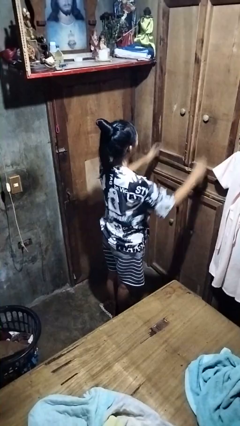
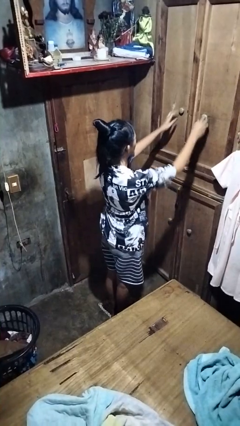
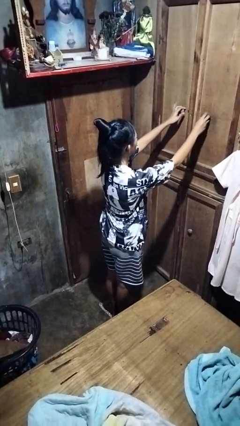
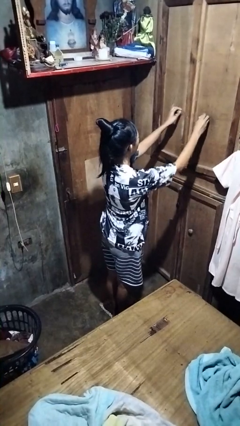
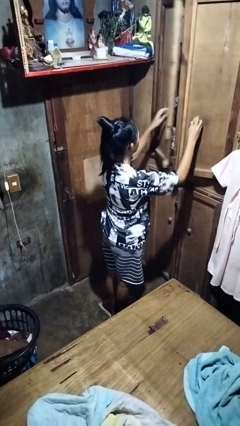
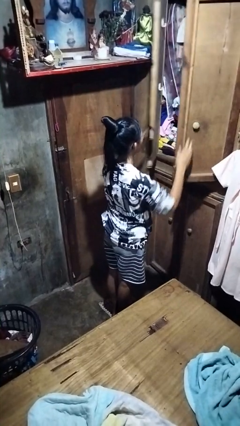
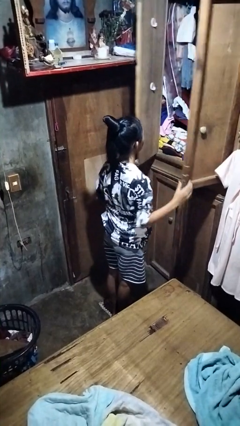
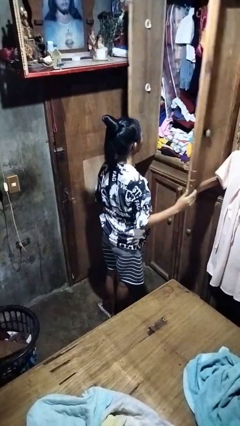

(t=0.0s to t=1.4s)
person opens closet door

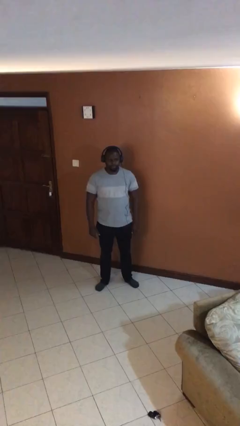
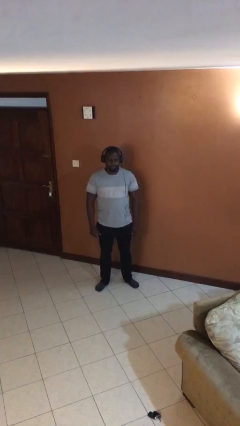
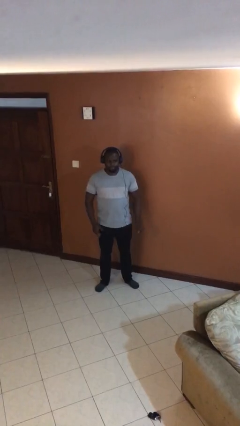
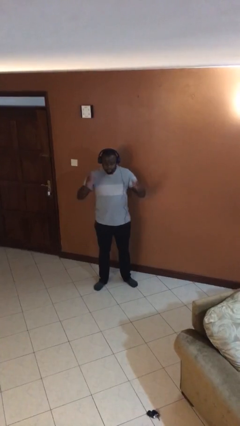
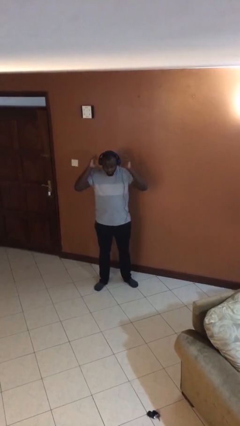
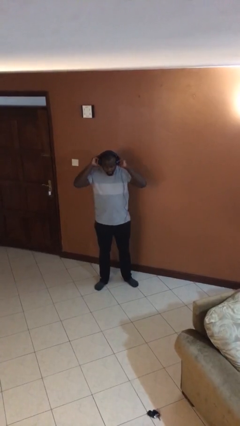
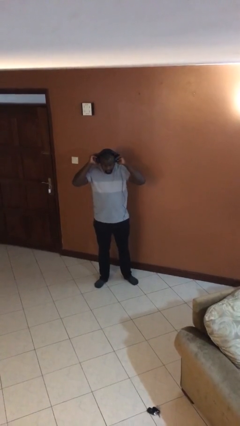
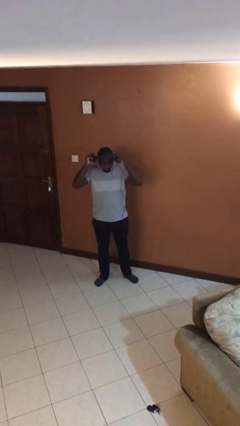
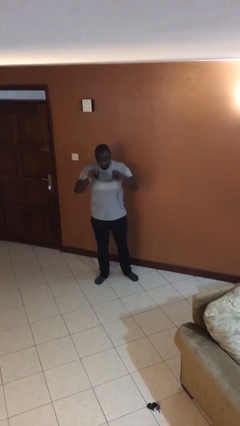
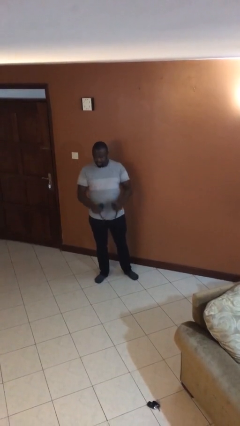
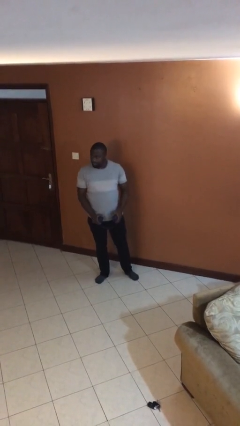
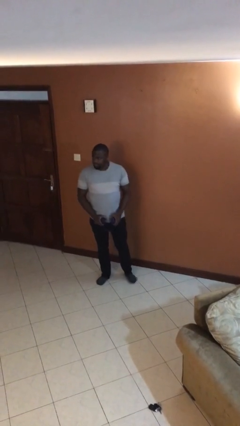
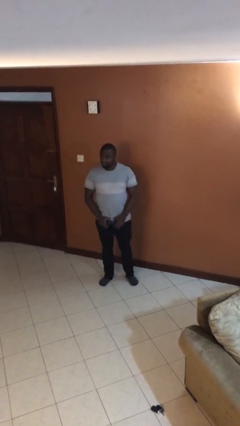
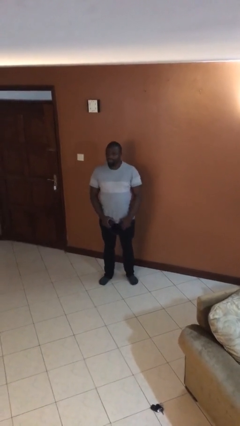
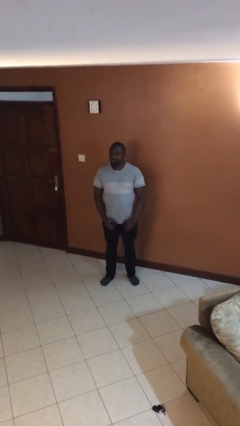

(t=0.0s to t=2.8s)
person takes off headphones

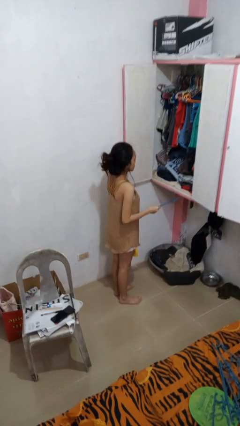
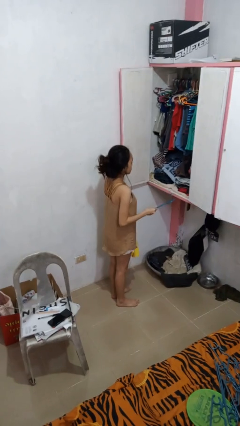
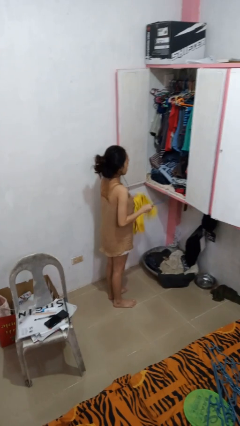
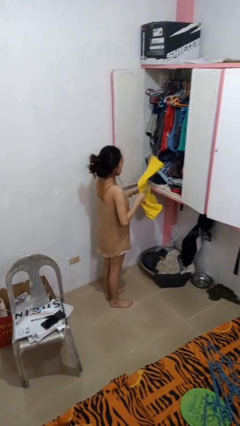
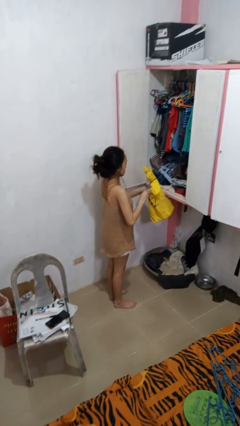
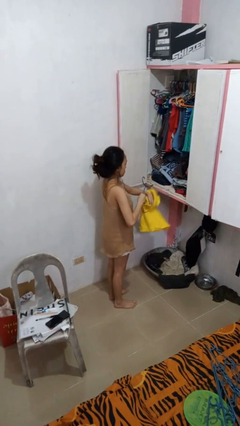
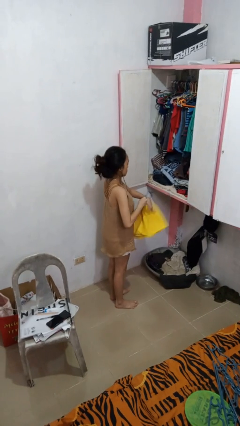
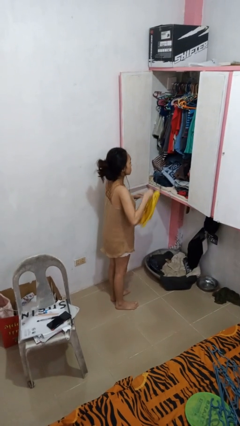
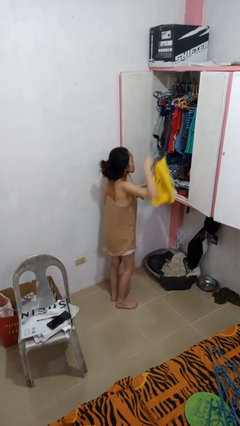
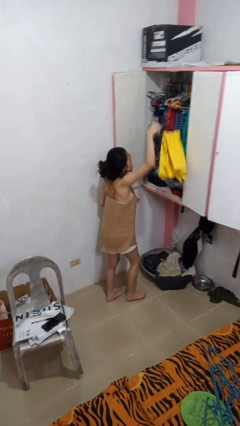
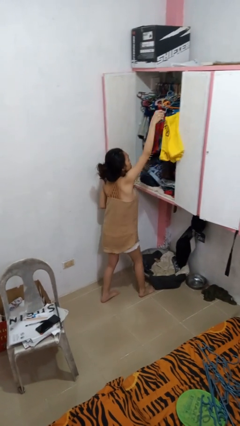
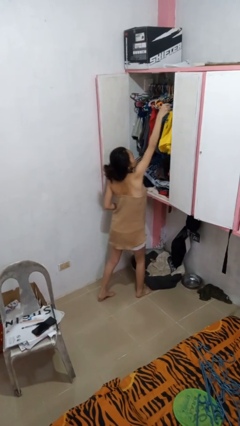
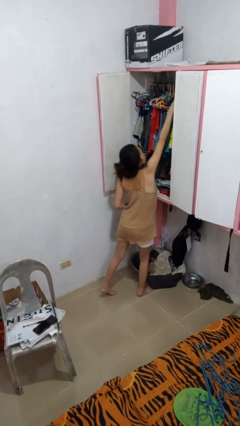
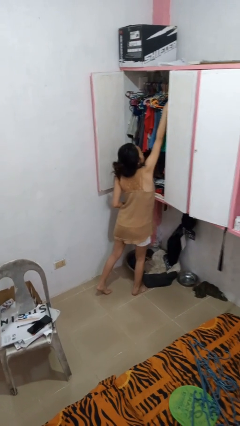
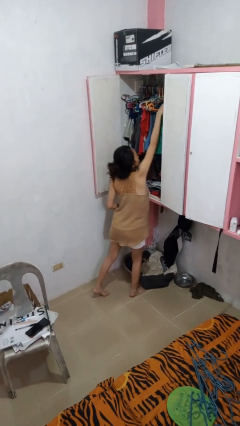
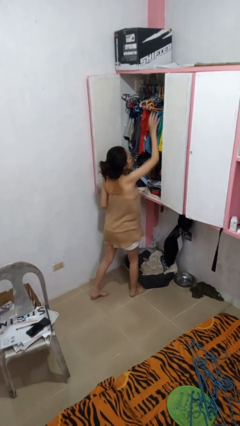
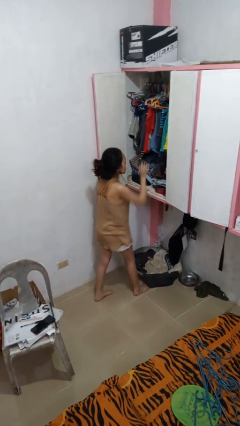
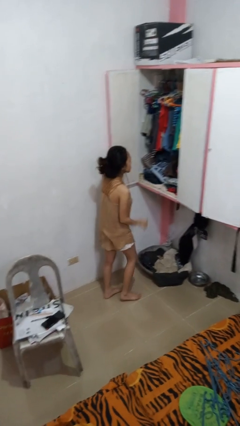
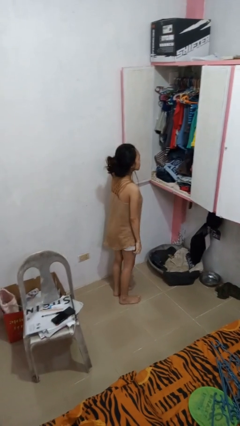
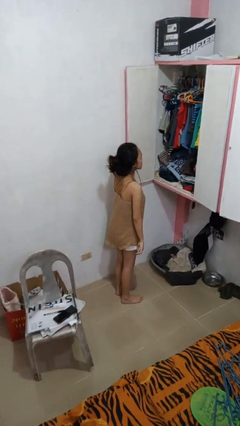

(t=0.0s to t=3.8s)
person puts clothes into closet

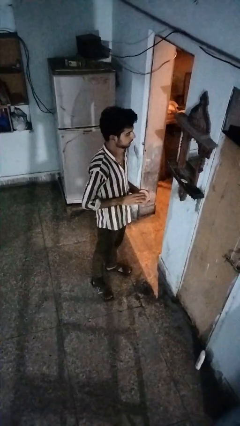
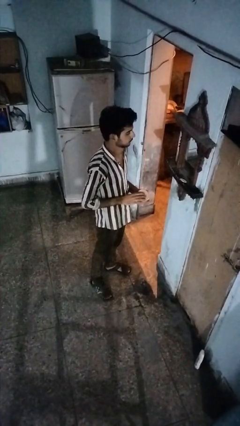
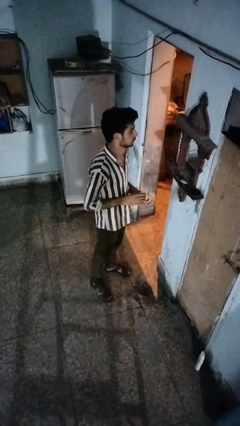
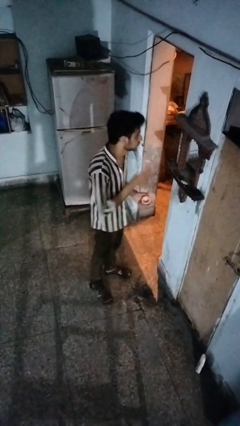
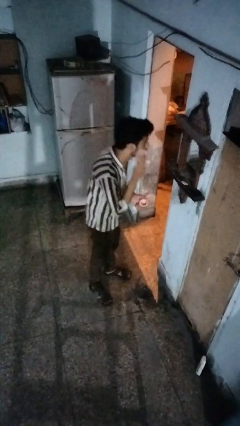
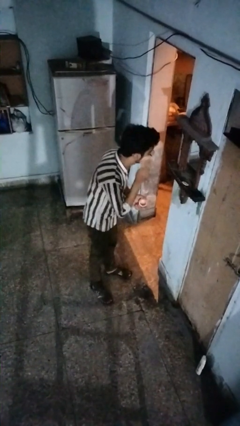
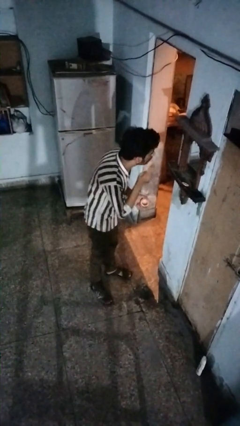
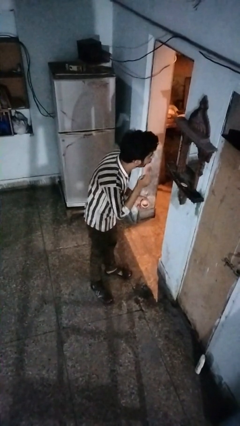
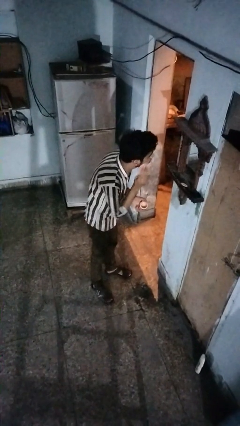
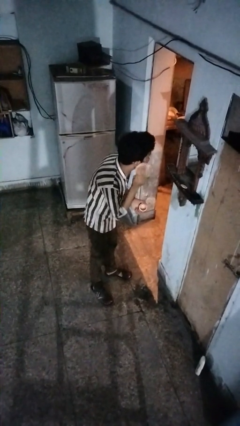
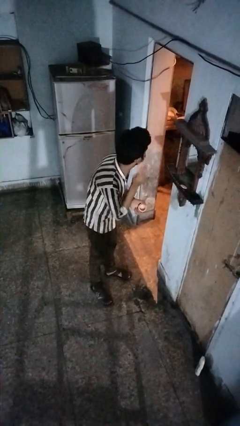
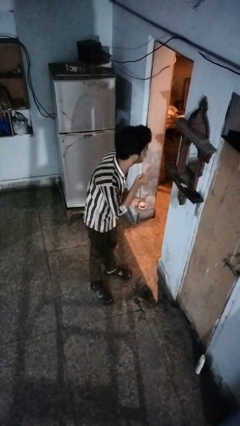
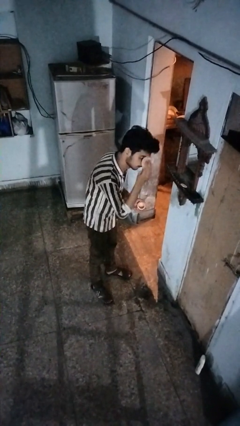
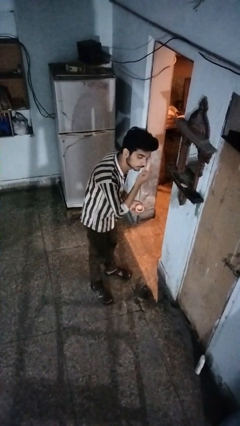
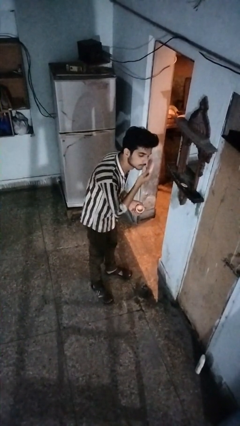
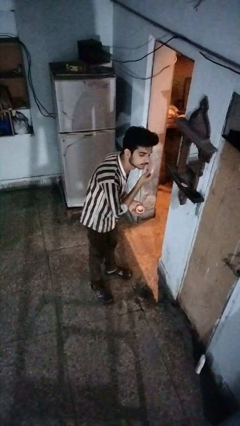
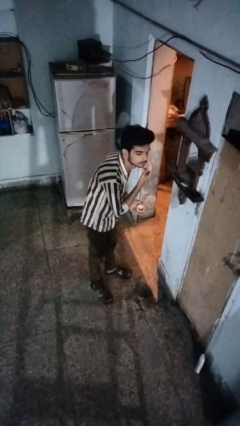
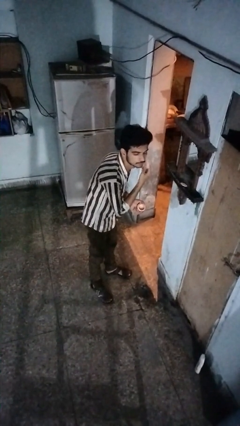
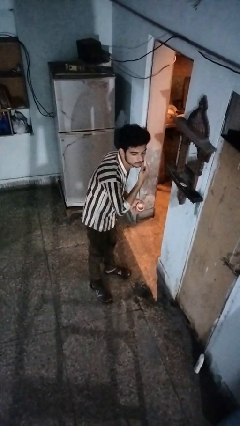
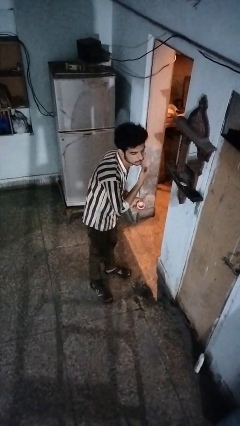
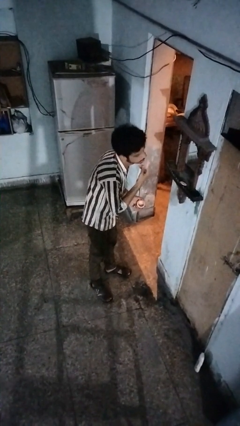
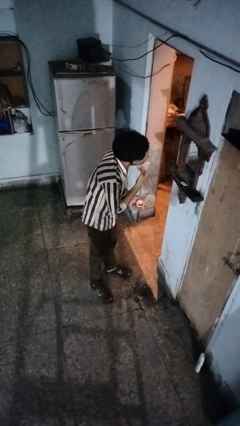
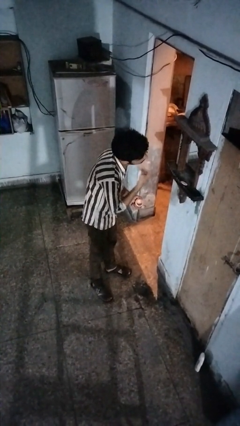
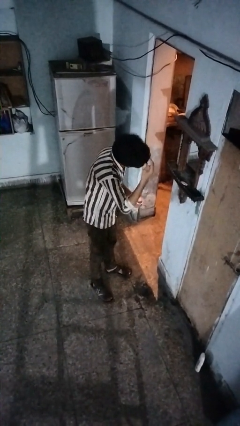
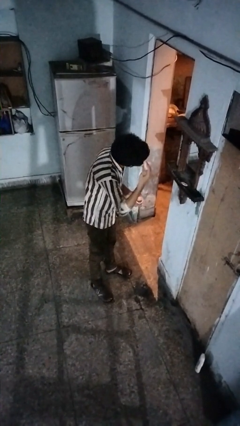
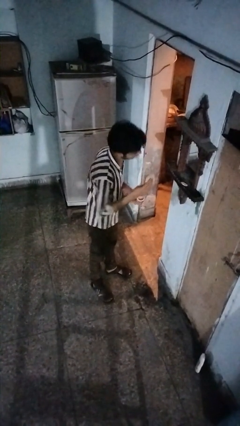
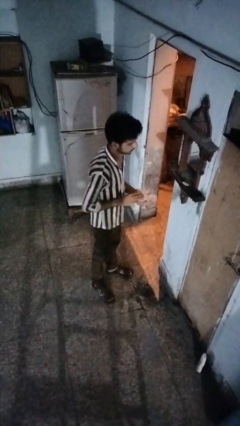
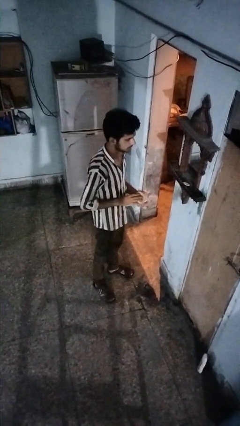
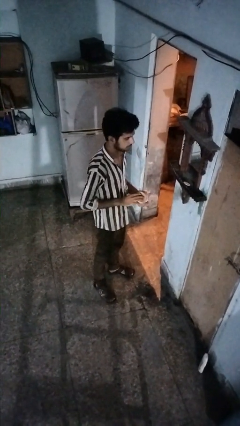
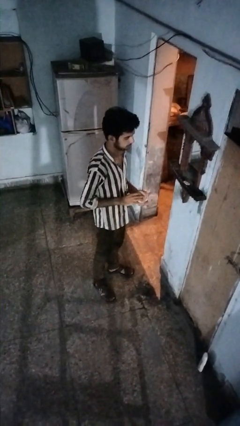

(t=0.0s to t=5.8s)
person applies foundation makeup

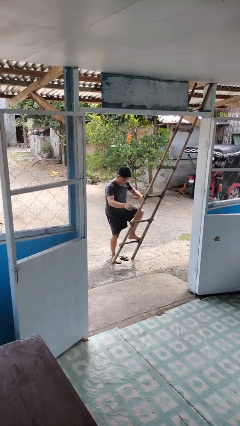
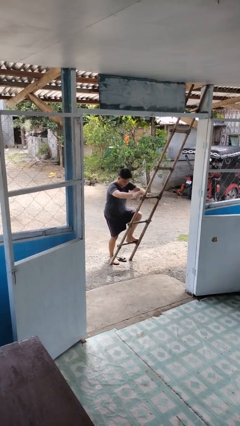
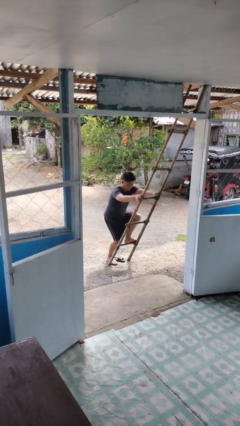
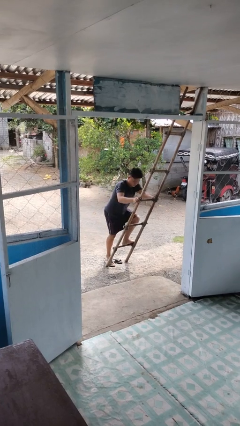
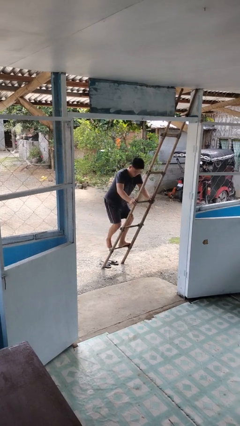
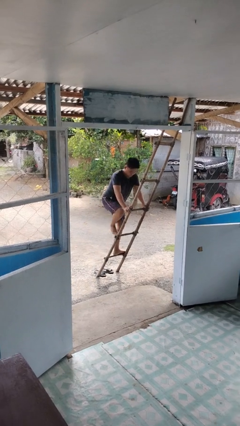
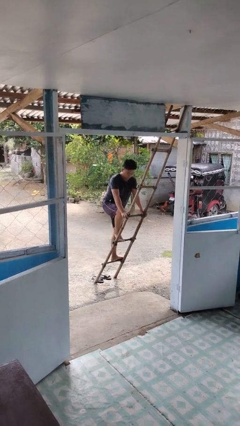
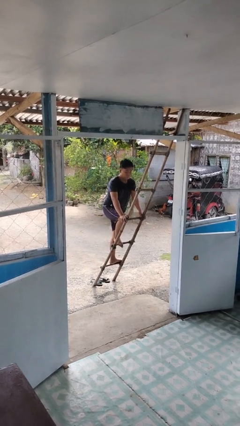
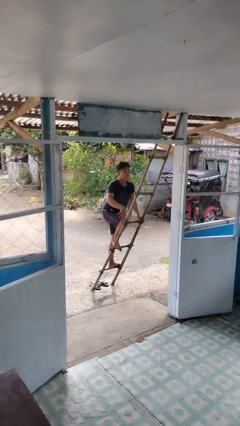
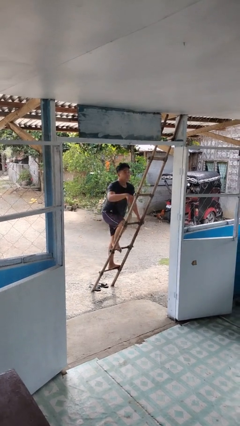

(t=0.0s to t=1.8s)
person climbs up ladder

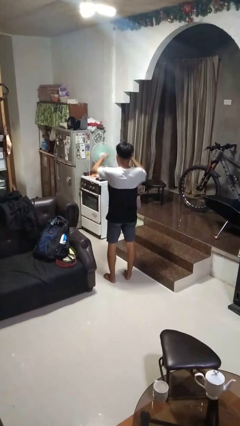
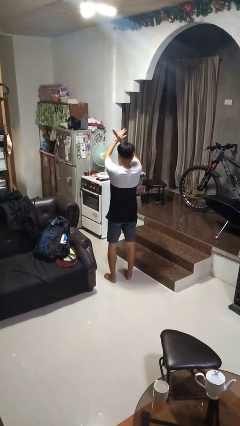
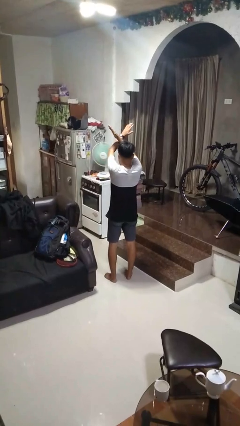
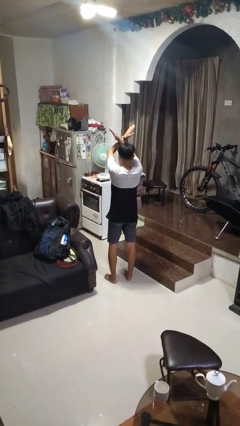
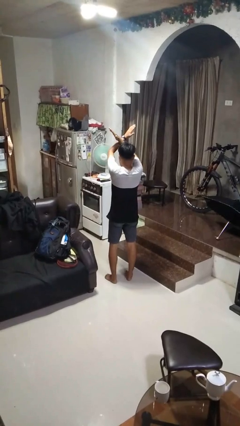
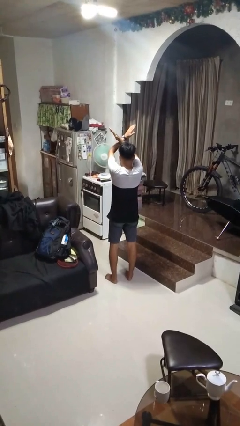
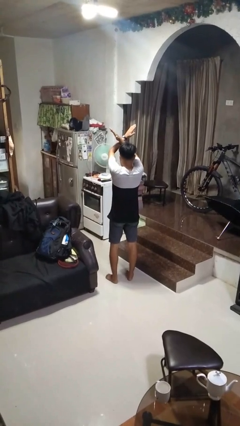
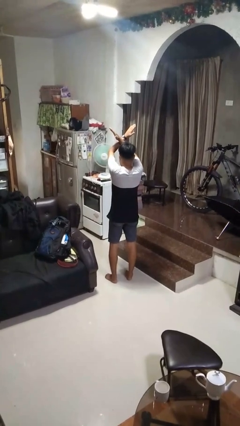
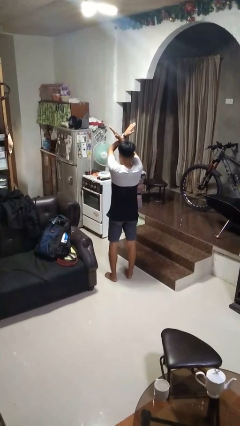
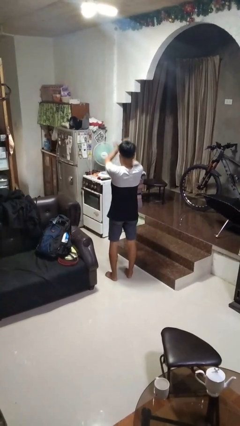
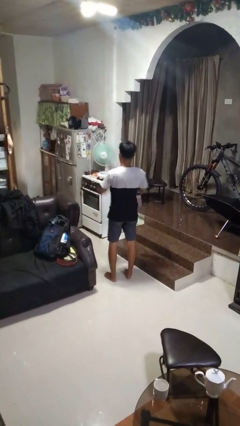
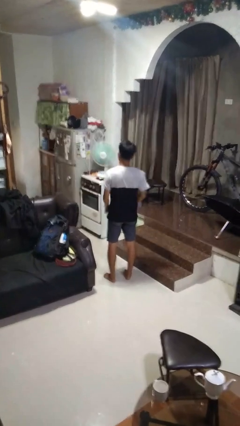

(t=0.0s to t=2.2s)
person gestures arms x
